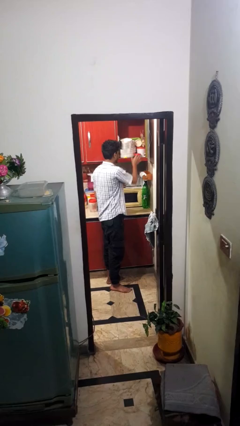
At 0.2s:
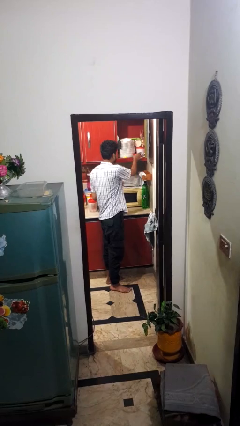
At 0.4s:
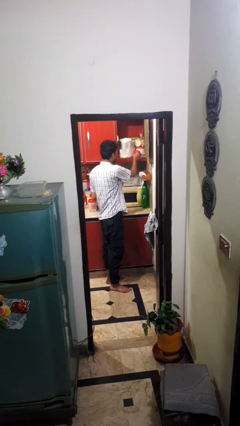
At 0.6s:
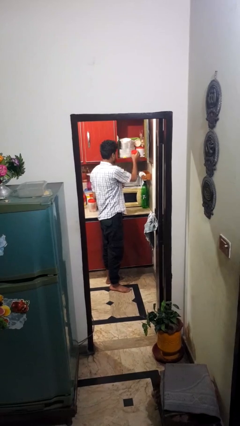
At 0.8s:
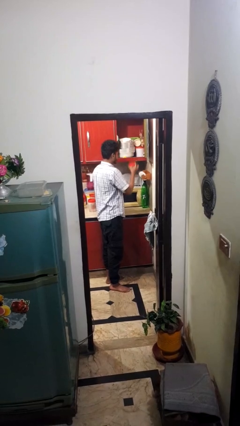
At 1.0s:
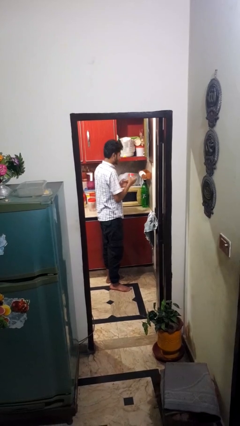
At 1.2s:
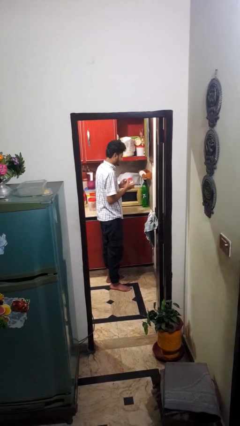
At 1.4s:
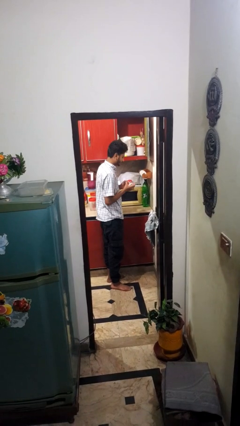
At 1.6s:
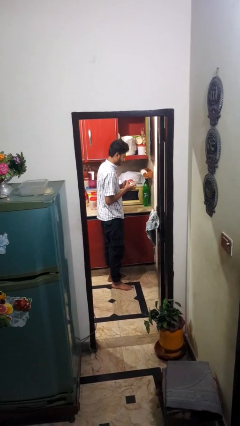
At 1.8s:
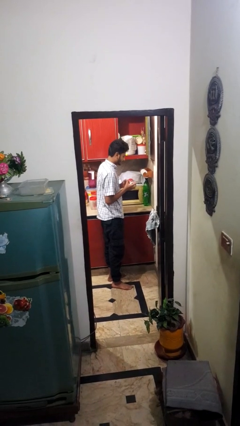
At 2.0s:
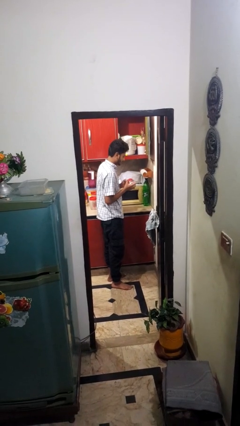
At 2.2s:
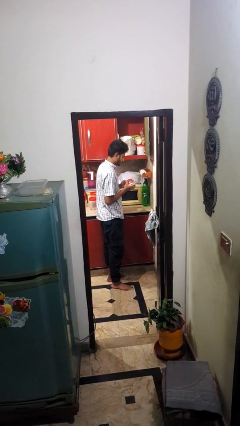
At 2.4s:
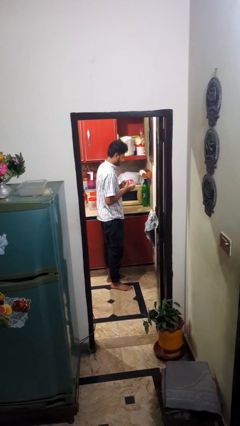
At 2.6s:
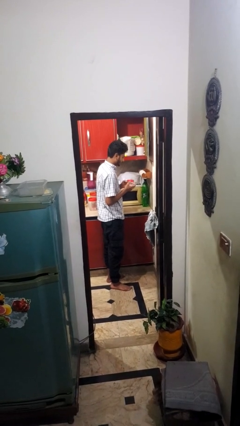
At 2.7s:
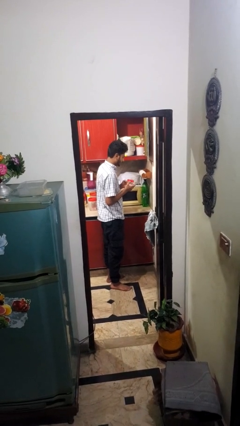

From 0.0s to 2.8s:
person picks up object from cabinet

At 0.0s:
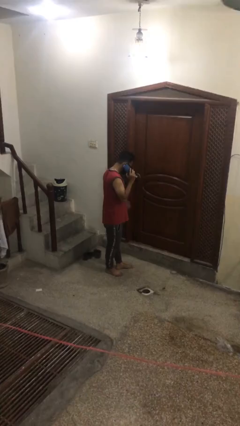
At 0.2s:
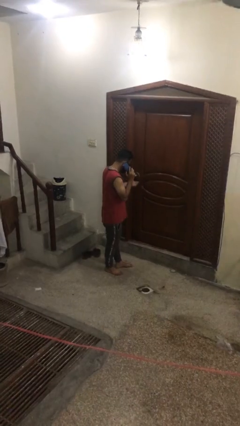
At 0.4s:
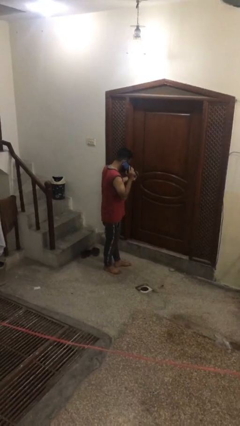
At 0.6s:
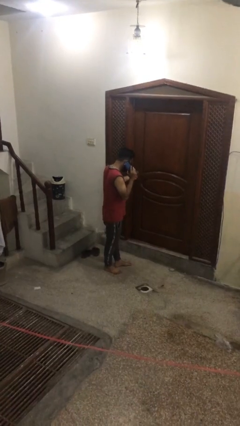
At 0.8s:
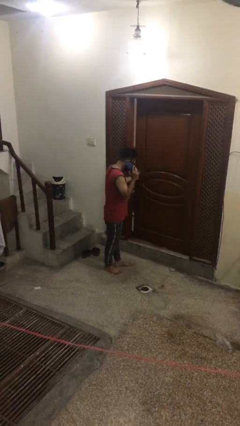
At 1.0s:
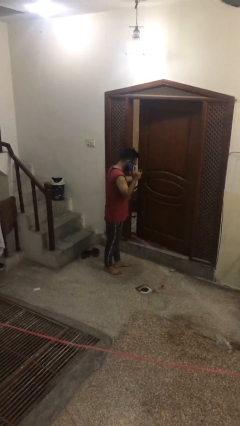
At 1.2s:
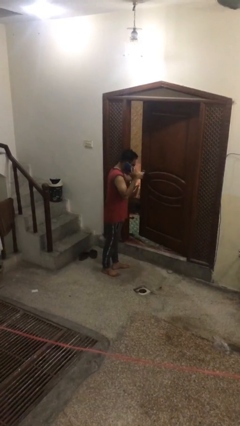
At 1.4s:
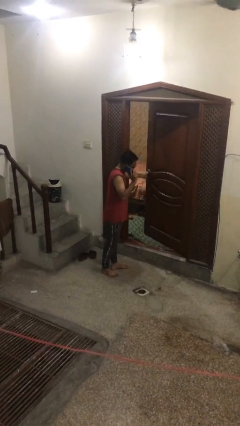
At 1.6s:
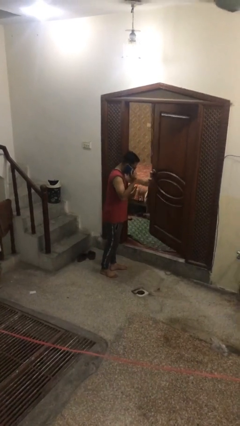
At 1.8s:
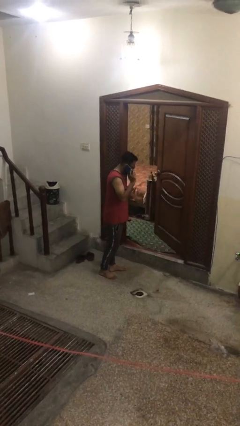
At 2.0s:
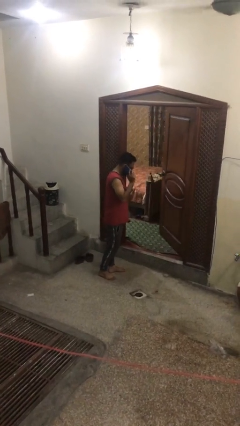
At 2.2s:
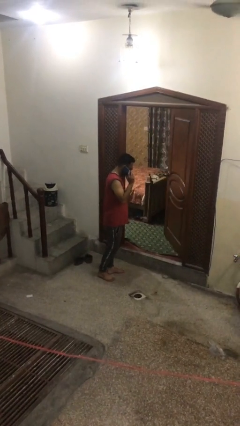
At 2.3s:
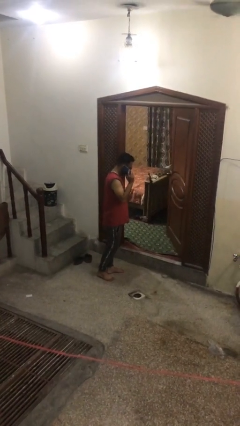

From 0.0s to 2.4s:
person opens facility door

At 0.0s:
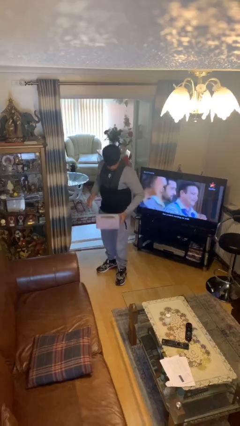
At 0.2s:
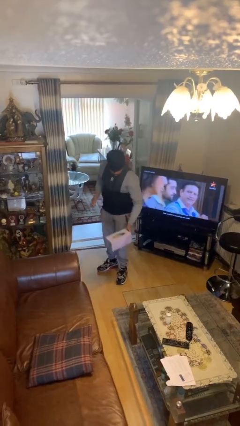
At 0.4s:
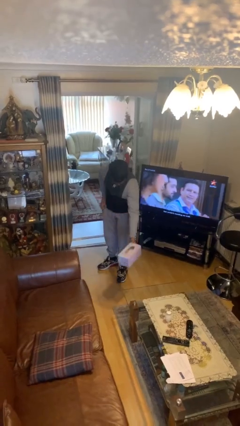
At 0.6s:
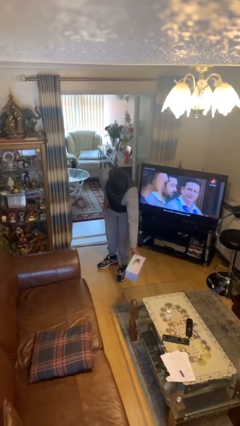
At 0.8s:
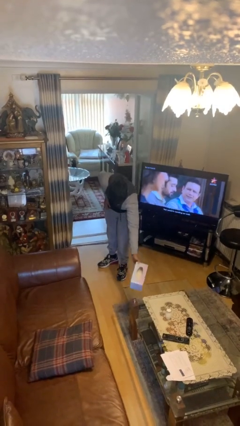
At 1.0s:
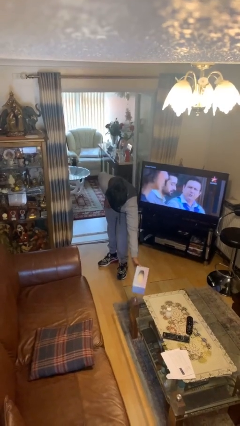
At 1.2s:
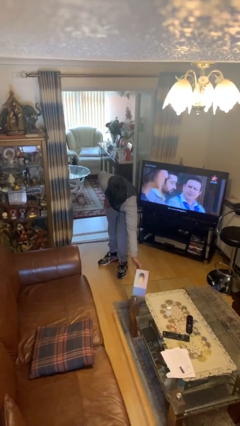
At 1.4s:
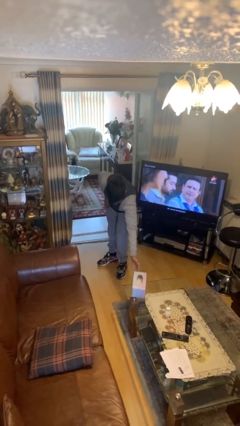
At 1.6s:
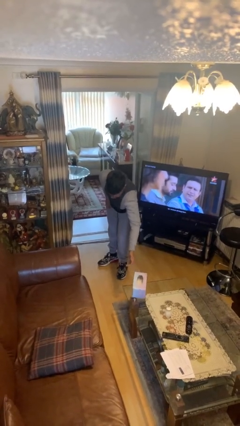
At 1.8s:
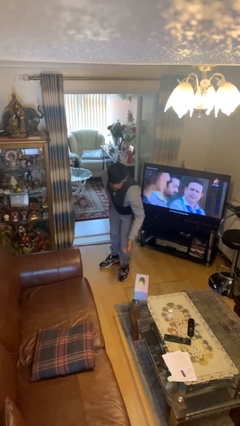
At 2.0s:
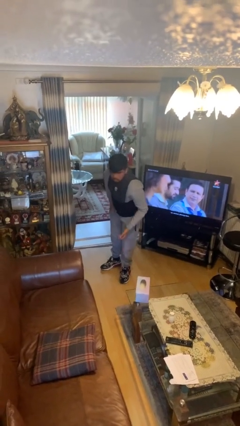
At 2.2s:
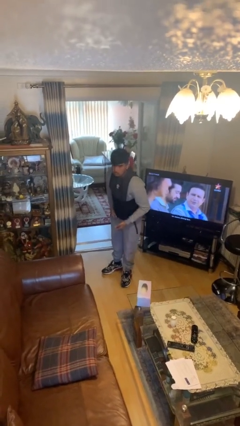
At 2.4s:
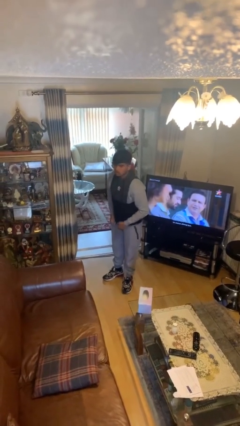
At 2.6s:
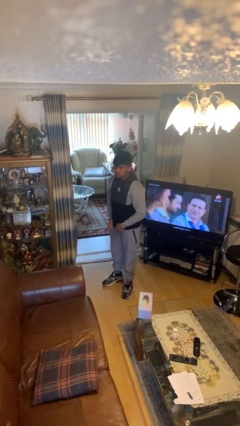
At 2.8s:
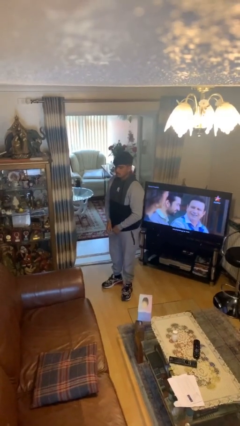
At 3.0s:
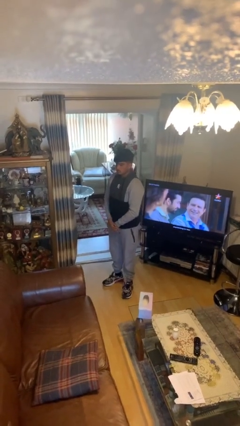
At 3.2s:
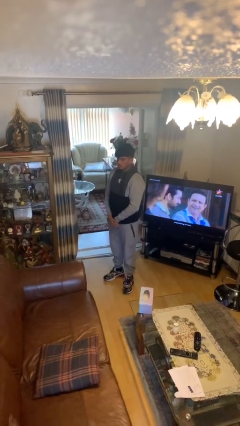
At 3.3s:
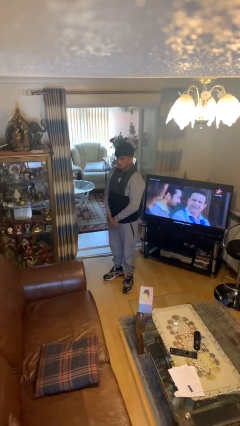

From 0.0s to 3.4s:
person puts down object on table

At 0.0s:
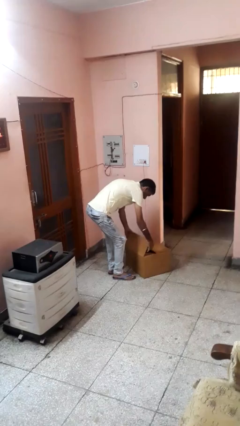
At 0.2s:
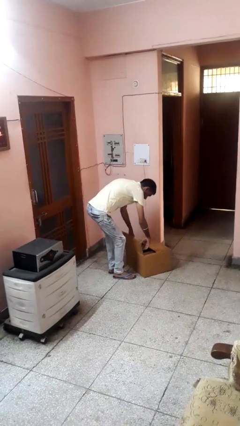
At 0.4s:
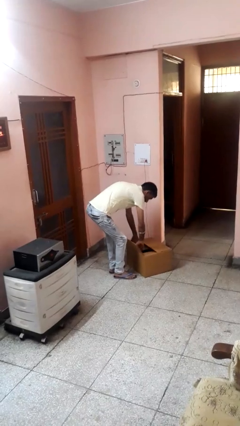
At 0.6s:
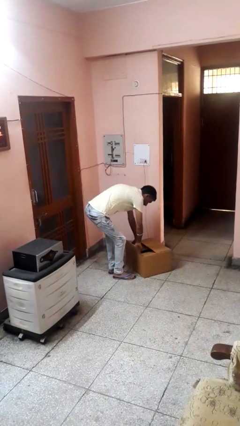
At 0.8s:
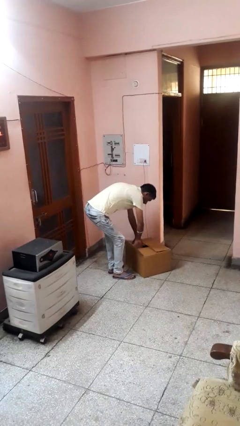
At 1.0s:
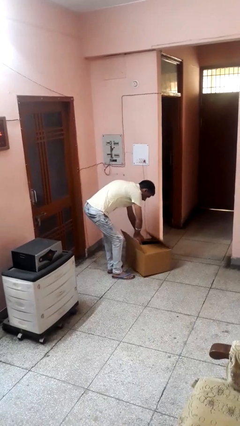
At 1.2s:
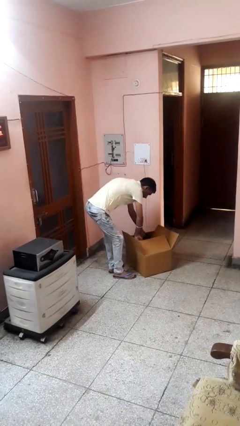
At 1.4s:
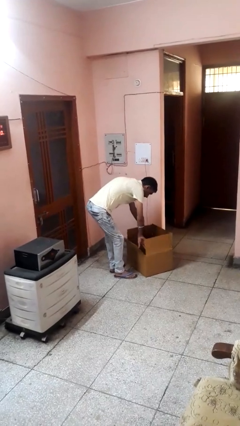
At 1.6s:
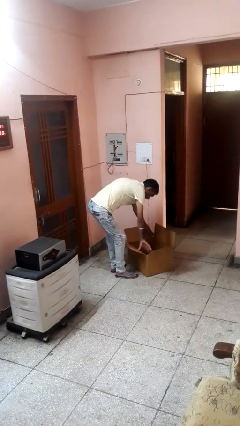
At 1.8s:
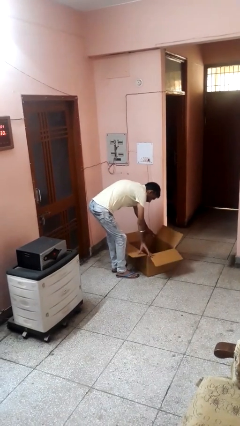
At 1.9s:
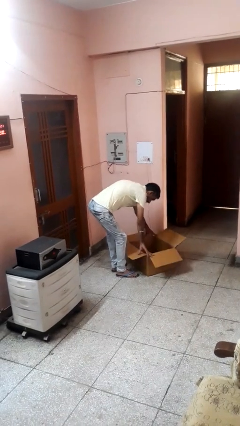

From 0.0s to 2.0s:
person opens box

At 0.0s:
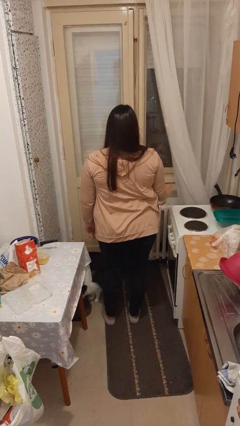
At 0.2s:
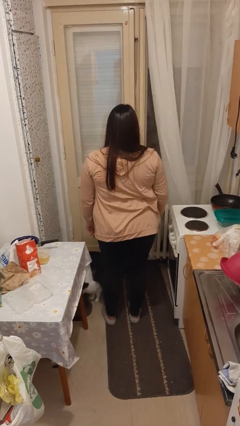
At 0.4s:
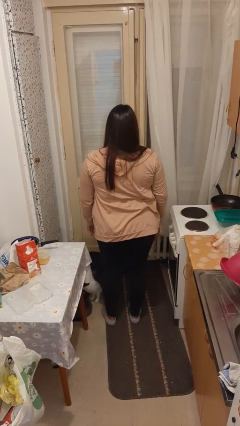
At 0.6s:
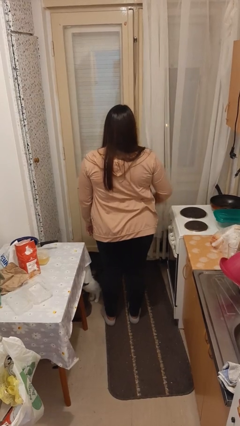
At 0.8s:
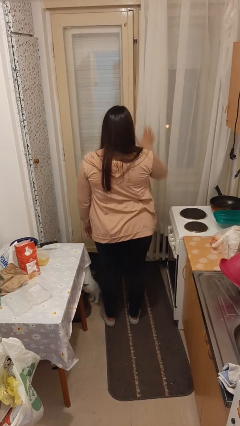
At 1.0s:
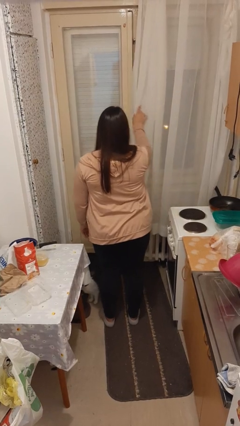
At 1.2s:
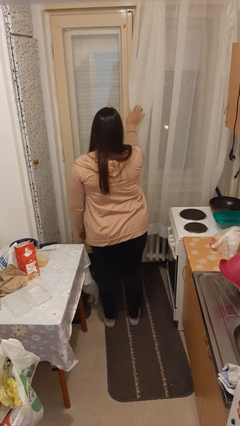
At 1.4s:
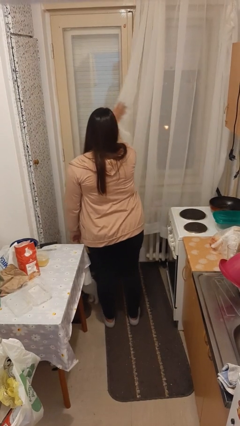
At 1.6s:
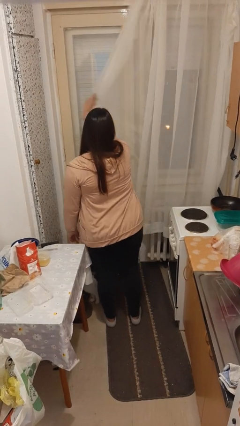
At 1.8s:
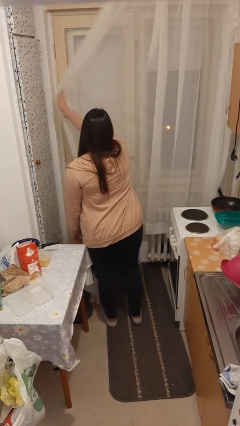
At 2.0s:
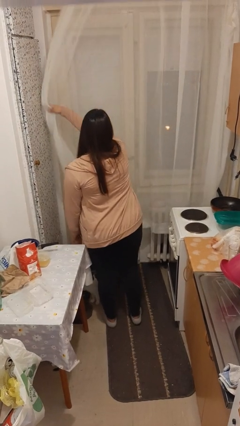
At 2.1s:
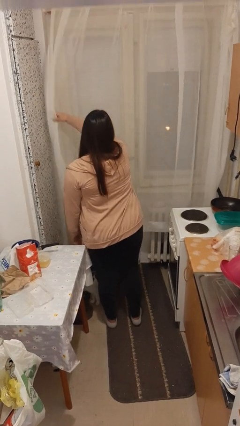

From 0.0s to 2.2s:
person closes curtains

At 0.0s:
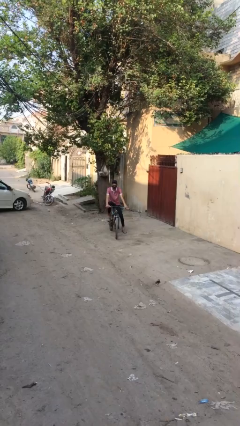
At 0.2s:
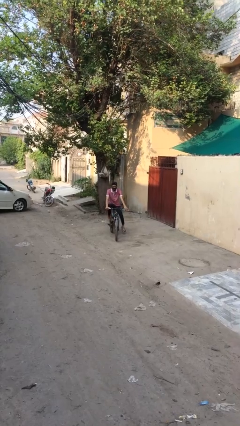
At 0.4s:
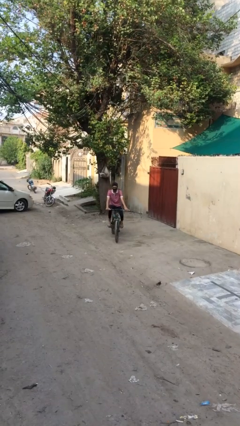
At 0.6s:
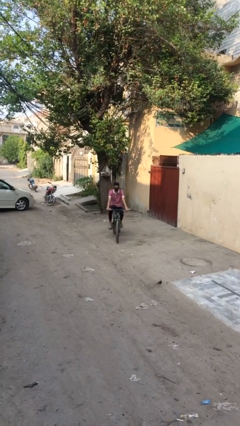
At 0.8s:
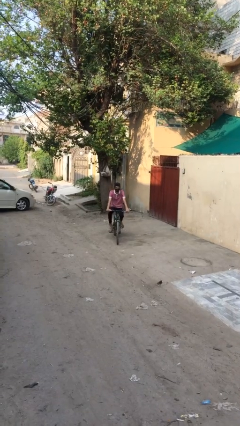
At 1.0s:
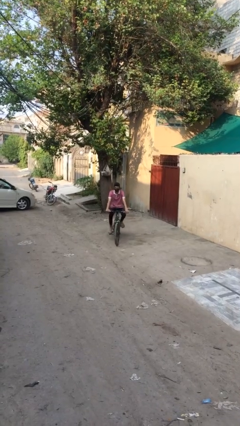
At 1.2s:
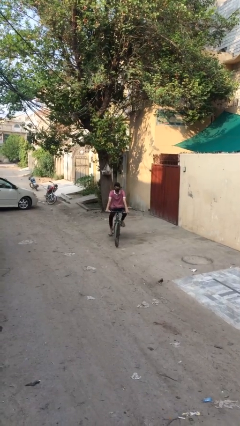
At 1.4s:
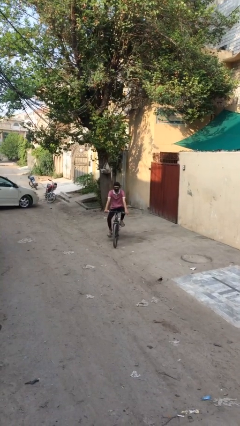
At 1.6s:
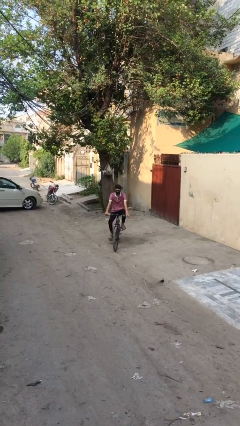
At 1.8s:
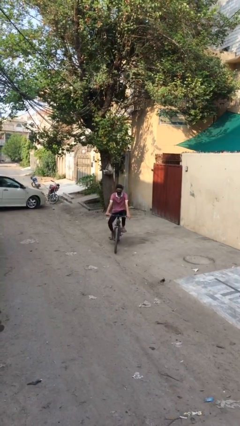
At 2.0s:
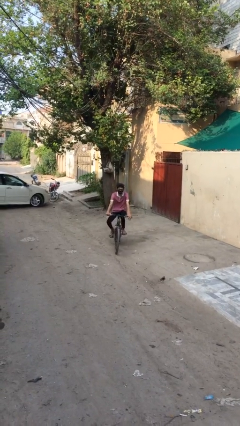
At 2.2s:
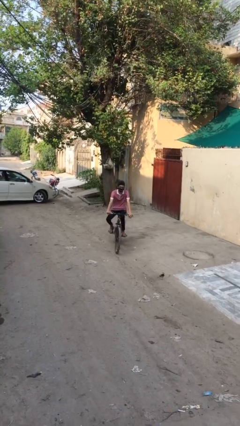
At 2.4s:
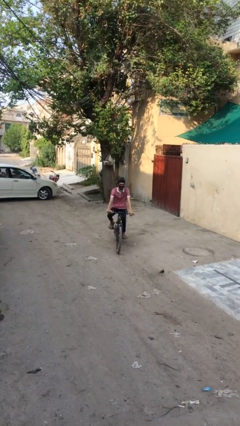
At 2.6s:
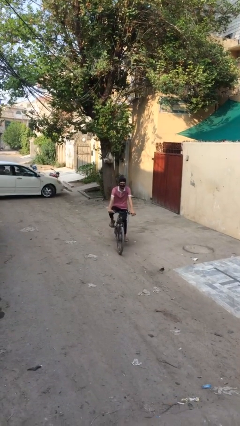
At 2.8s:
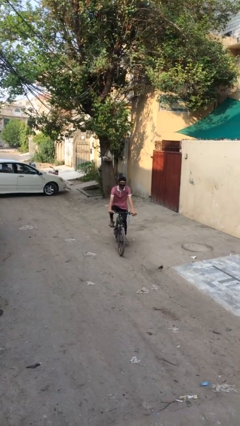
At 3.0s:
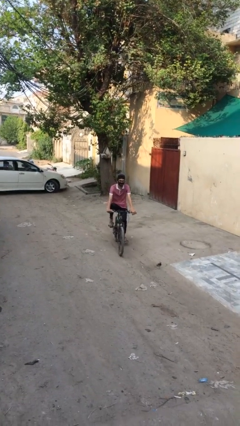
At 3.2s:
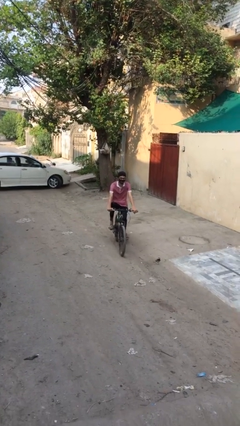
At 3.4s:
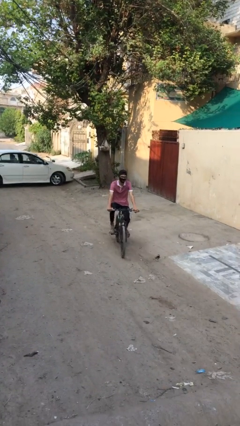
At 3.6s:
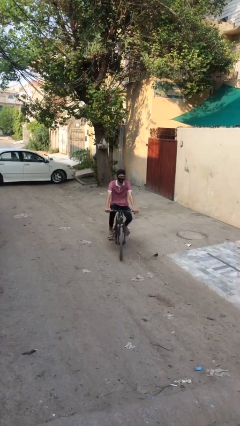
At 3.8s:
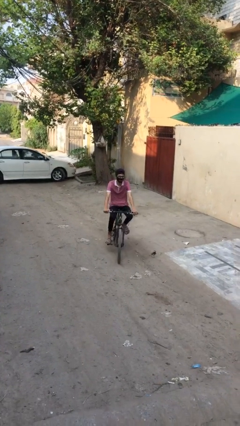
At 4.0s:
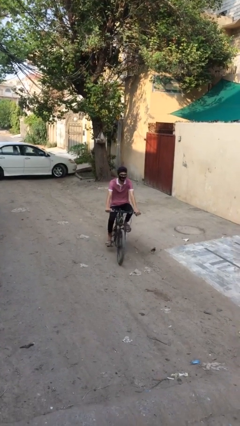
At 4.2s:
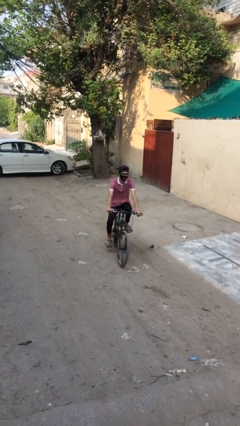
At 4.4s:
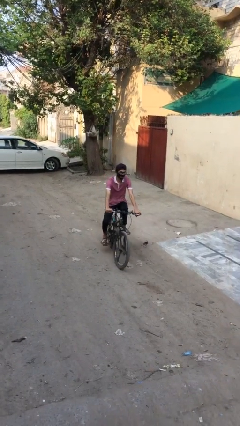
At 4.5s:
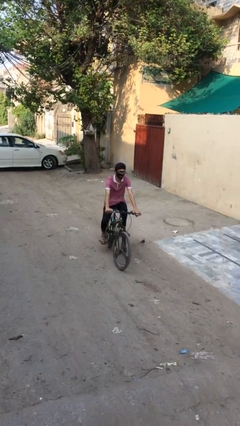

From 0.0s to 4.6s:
person rides bicycle
